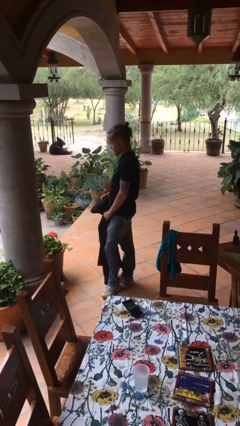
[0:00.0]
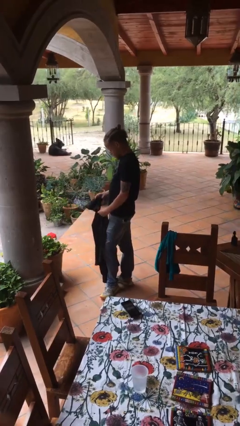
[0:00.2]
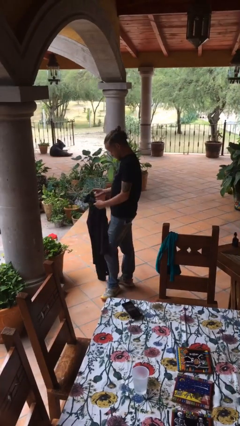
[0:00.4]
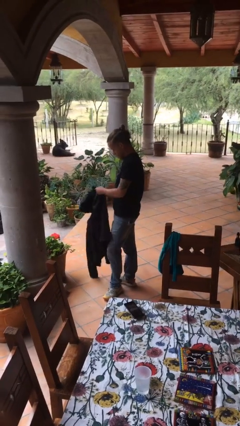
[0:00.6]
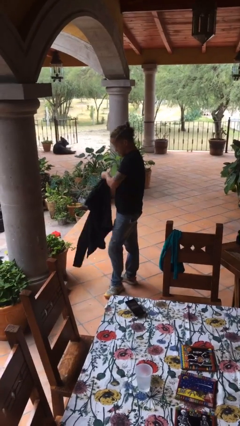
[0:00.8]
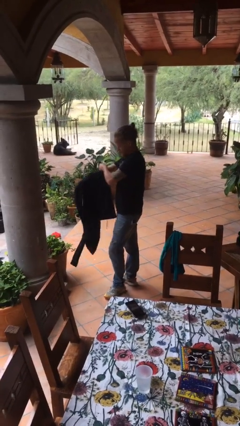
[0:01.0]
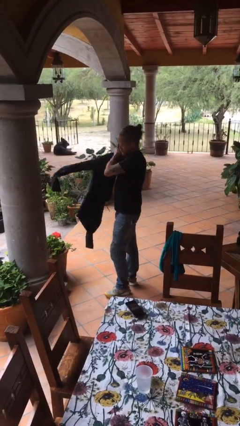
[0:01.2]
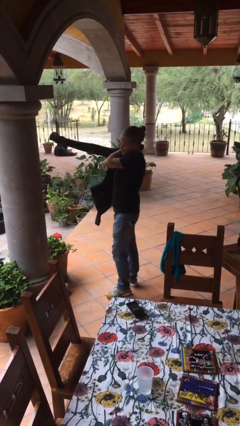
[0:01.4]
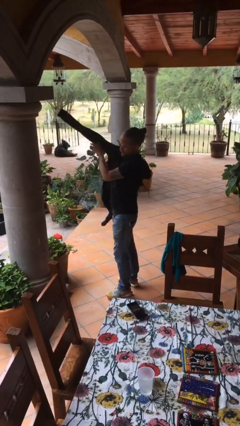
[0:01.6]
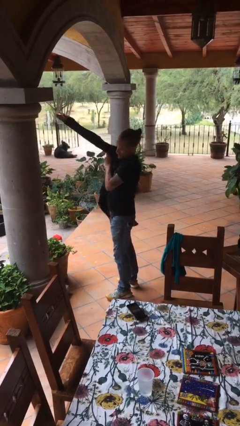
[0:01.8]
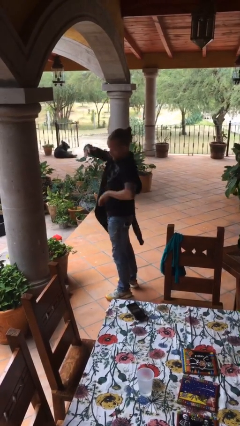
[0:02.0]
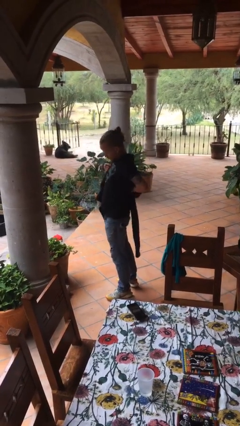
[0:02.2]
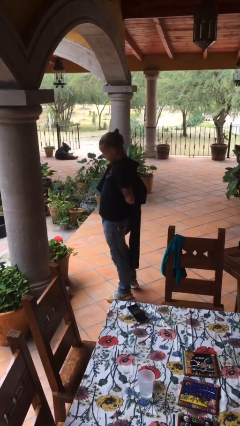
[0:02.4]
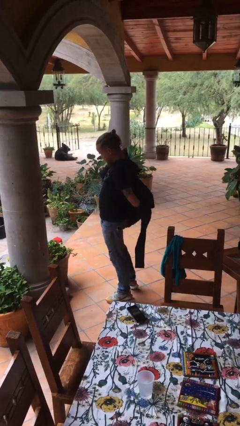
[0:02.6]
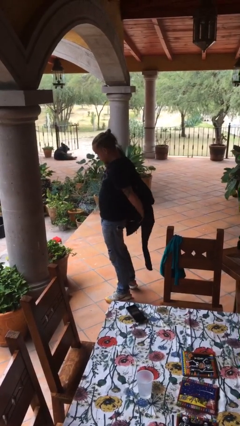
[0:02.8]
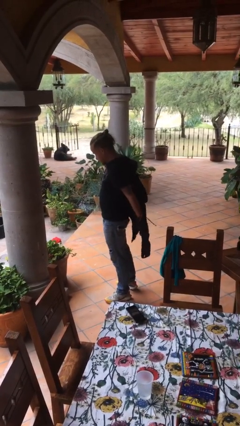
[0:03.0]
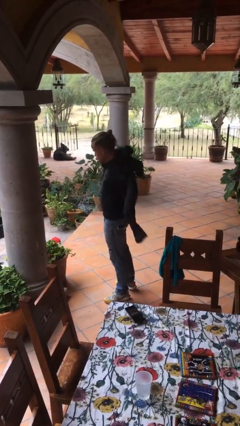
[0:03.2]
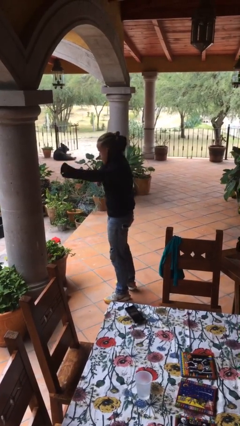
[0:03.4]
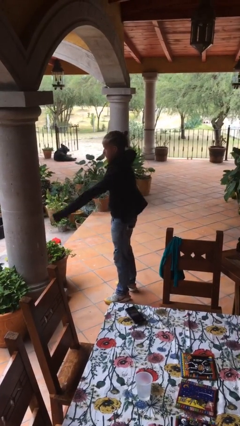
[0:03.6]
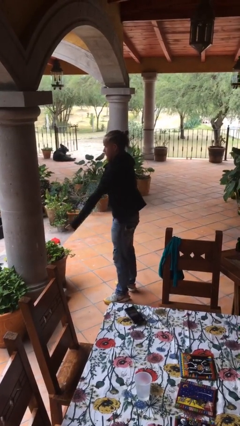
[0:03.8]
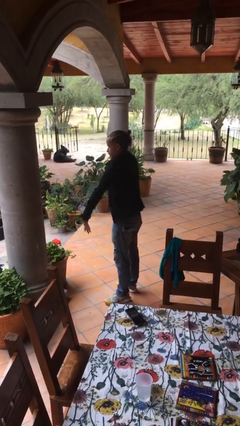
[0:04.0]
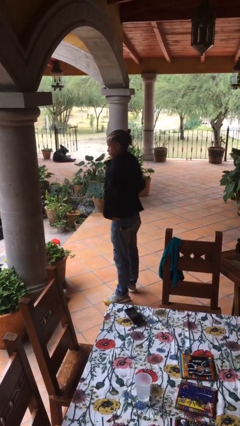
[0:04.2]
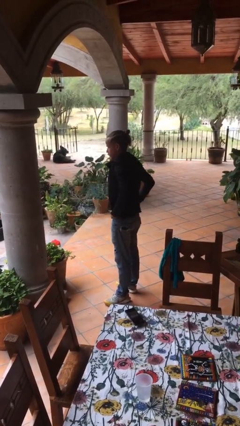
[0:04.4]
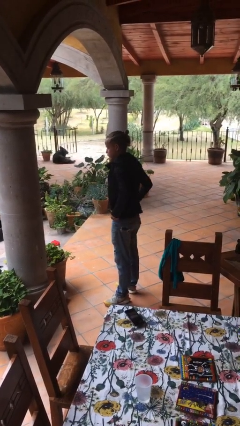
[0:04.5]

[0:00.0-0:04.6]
person puts on jacket

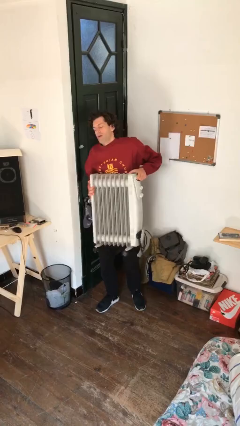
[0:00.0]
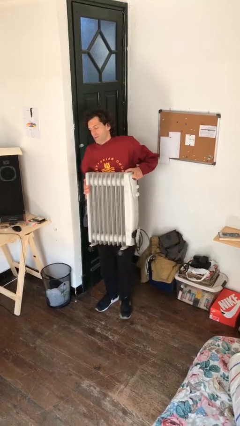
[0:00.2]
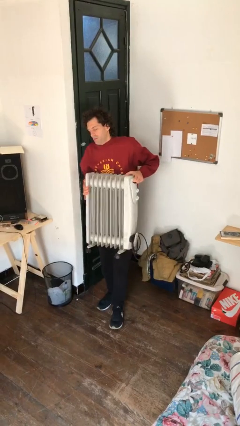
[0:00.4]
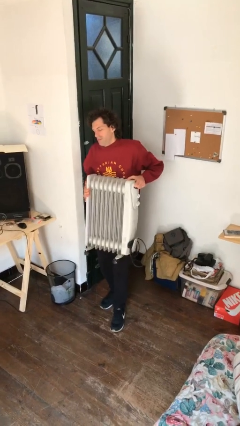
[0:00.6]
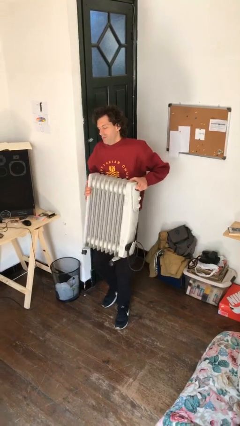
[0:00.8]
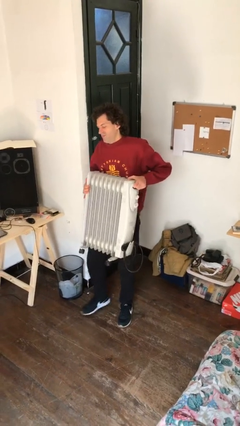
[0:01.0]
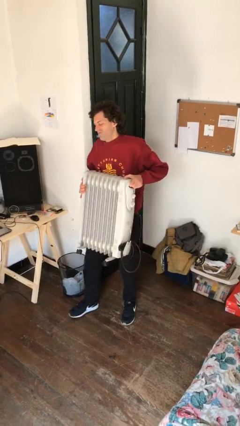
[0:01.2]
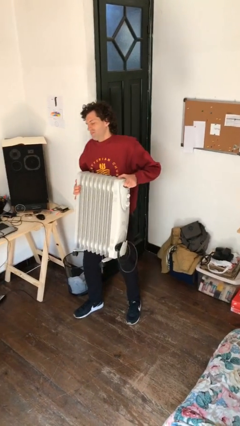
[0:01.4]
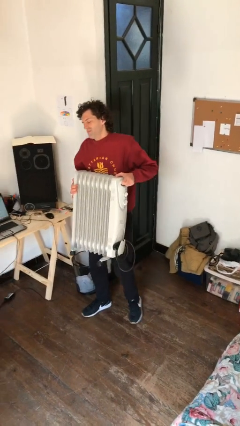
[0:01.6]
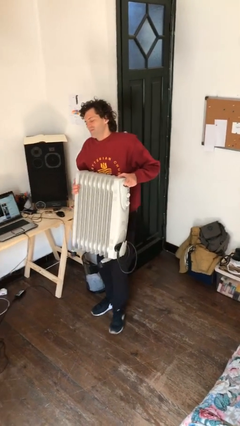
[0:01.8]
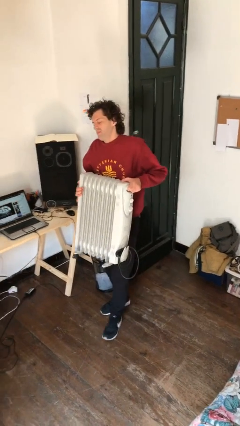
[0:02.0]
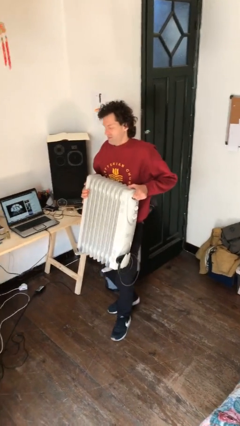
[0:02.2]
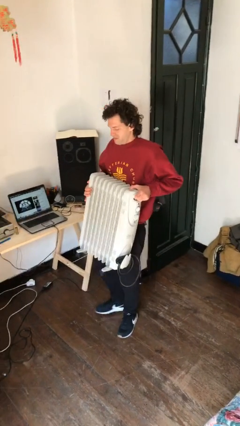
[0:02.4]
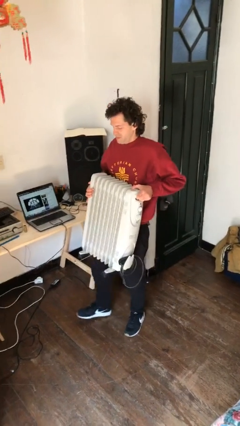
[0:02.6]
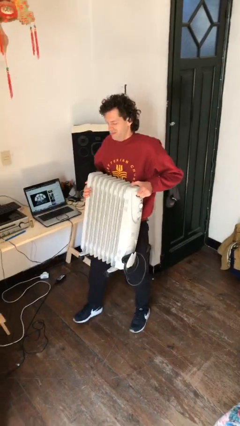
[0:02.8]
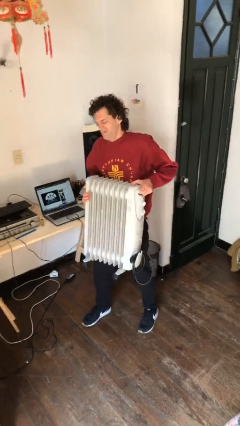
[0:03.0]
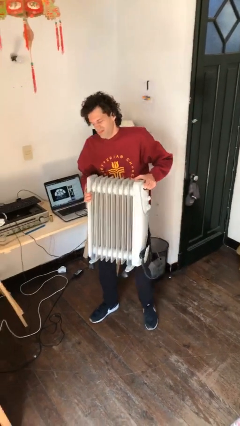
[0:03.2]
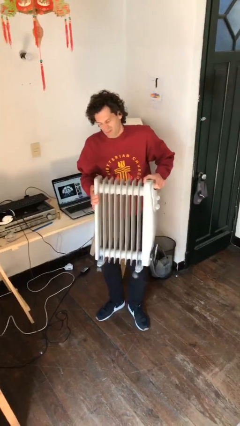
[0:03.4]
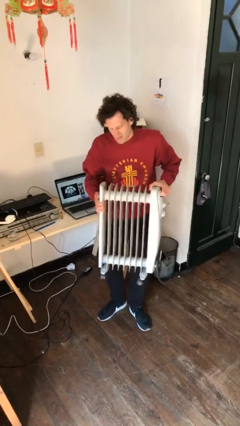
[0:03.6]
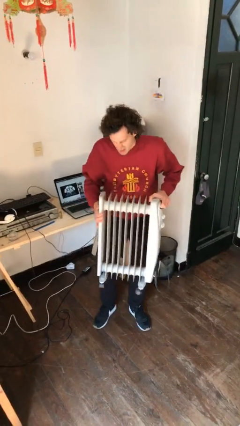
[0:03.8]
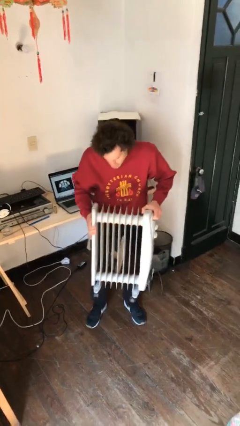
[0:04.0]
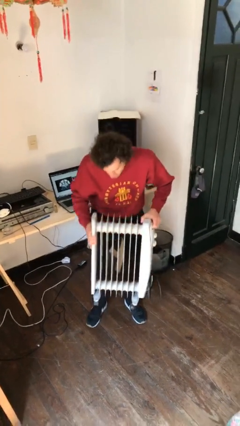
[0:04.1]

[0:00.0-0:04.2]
person carries heavy object

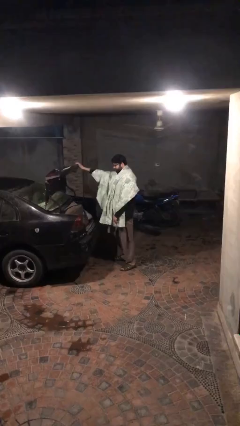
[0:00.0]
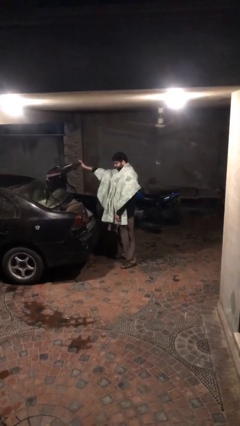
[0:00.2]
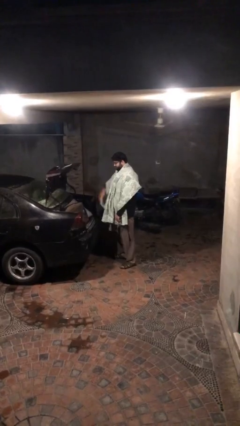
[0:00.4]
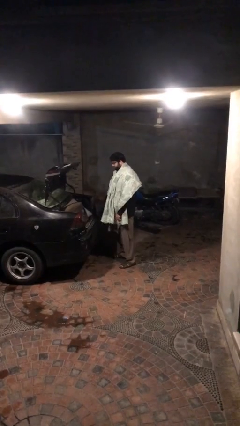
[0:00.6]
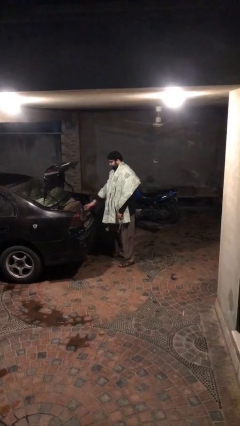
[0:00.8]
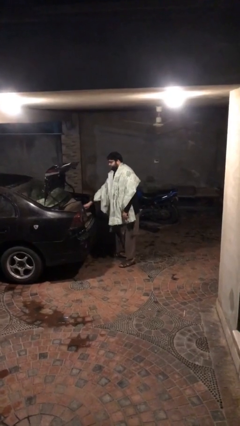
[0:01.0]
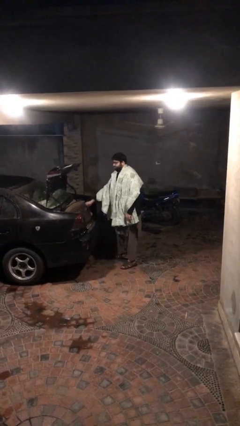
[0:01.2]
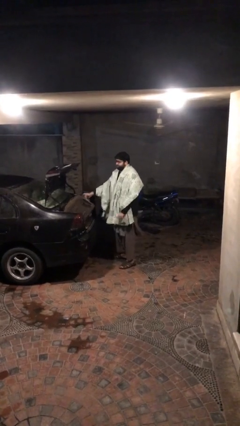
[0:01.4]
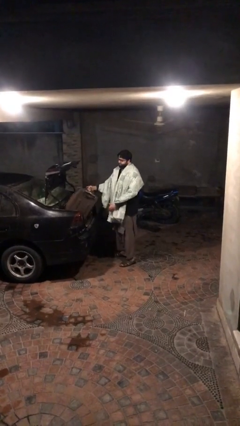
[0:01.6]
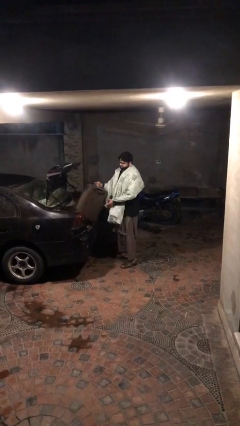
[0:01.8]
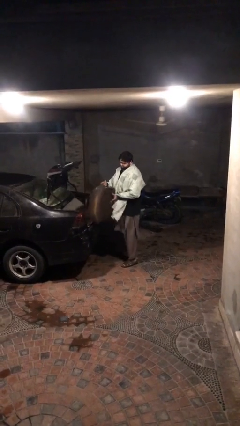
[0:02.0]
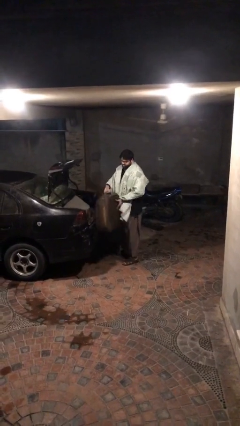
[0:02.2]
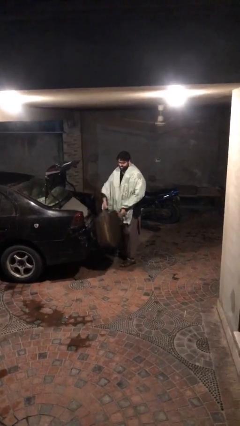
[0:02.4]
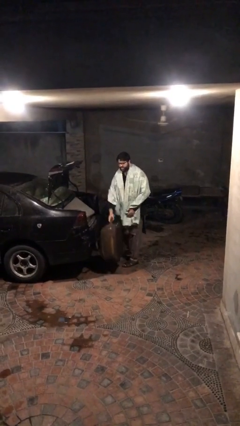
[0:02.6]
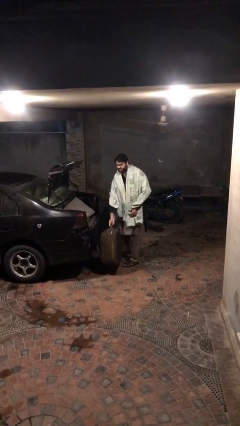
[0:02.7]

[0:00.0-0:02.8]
person unloads car

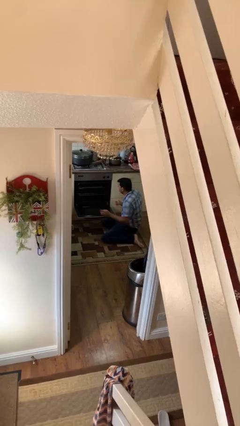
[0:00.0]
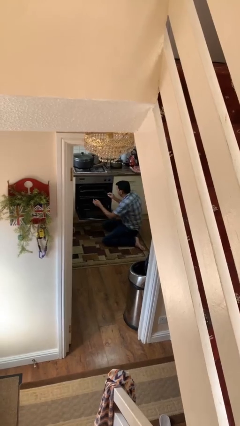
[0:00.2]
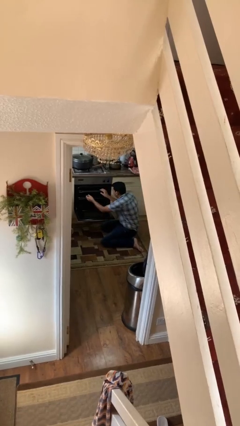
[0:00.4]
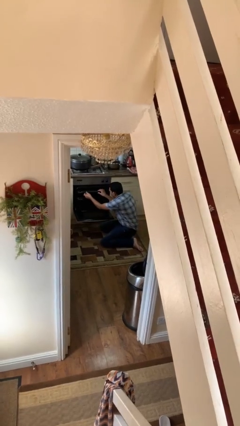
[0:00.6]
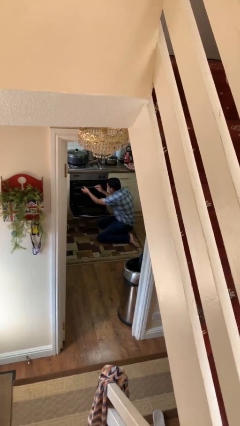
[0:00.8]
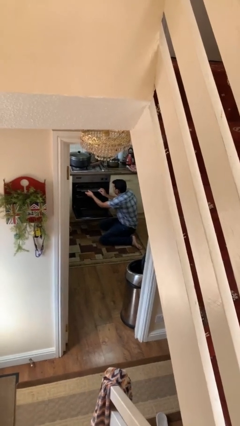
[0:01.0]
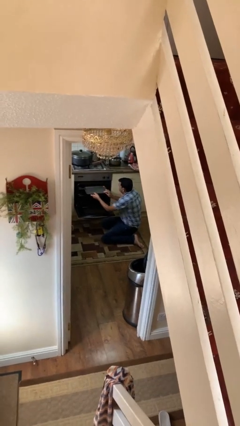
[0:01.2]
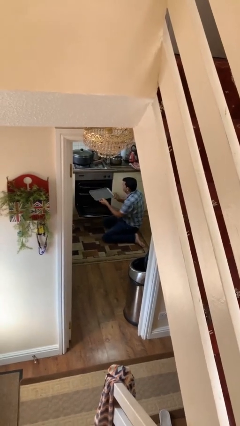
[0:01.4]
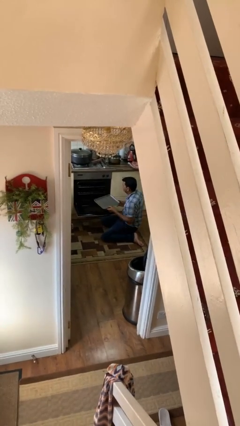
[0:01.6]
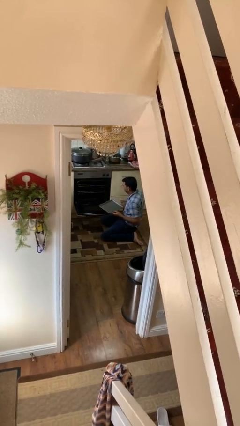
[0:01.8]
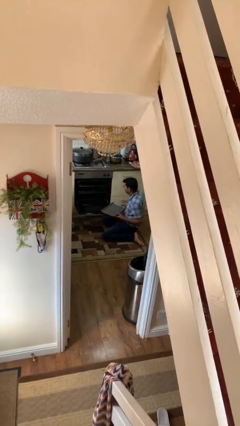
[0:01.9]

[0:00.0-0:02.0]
person takes object from oven

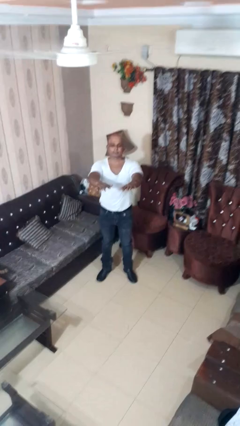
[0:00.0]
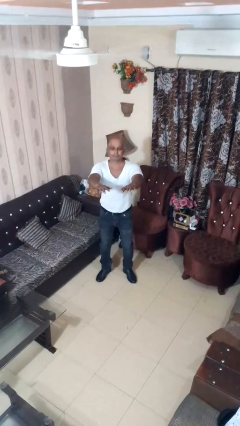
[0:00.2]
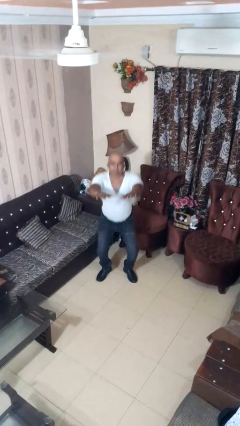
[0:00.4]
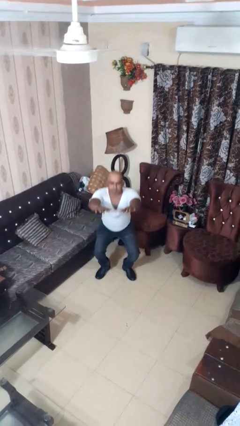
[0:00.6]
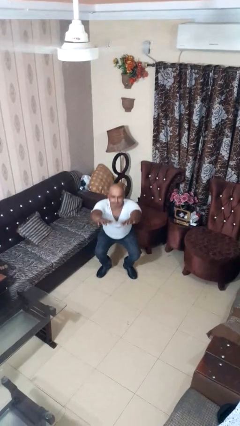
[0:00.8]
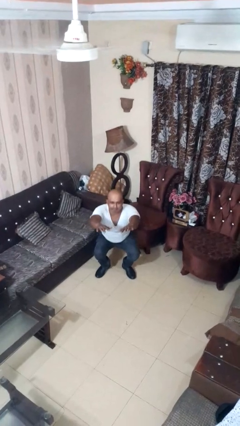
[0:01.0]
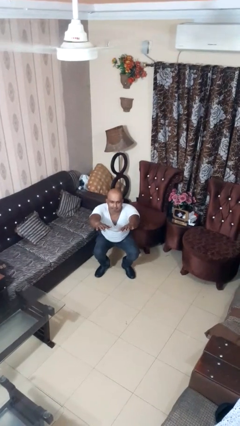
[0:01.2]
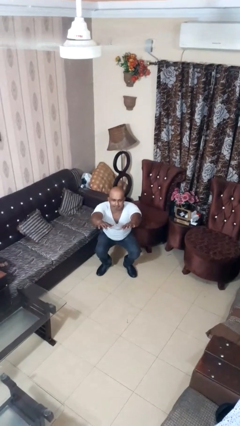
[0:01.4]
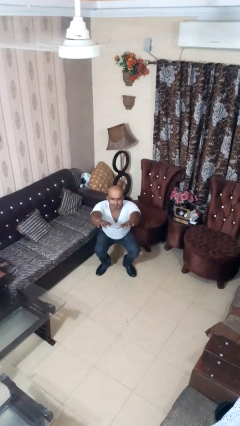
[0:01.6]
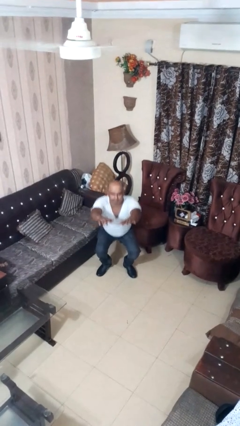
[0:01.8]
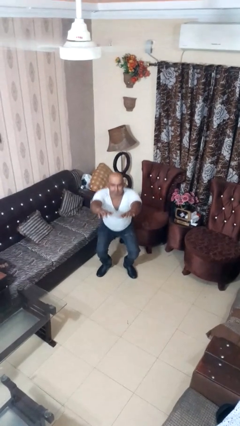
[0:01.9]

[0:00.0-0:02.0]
person squats

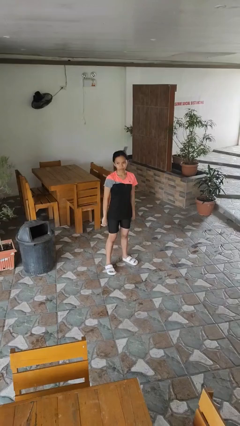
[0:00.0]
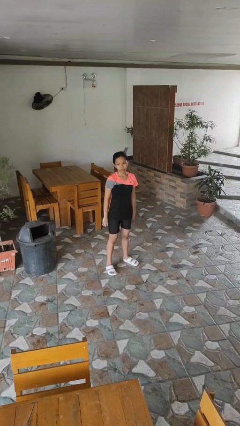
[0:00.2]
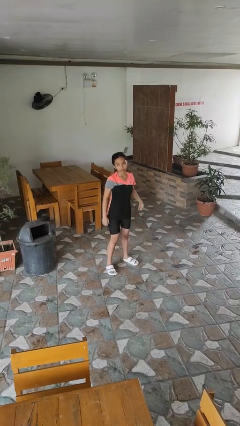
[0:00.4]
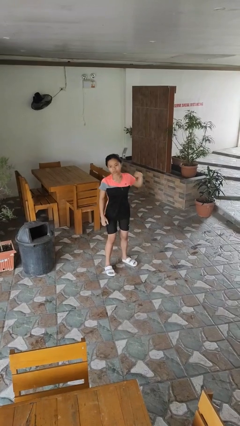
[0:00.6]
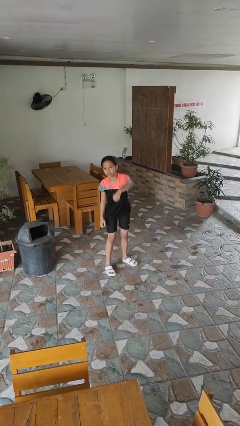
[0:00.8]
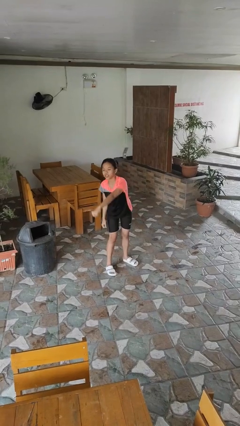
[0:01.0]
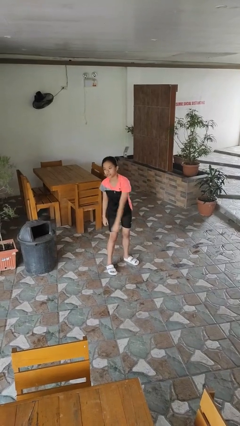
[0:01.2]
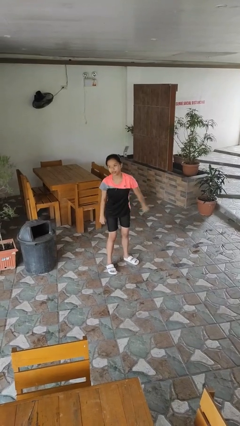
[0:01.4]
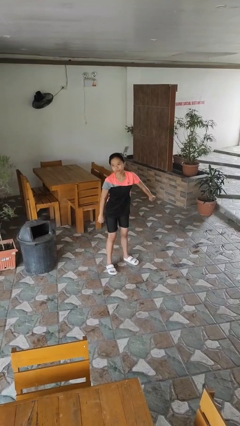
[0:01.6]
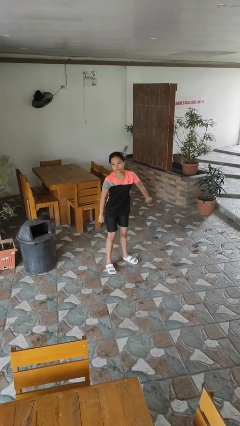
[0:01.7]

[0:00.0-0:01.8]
person punches
